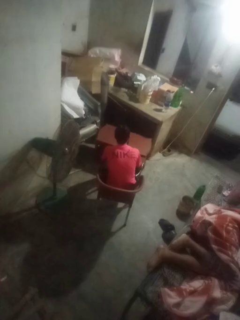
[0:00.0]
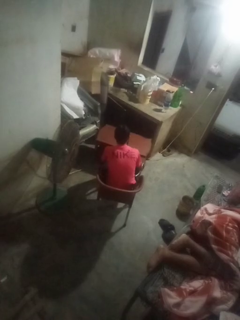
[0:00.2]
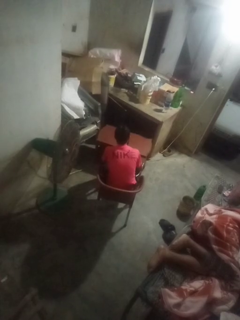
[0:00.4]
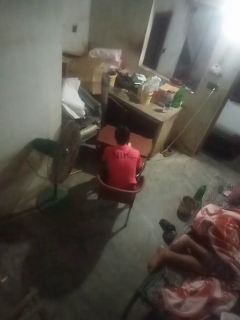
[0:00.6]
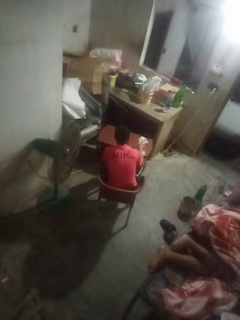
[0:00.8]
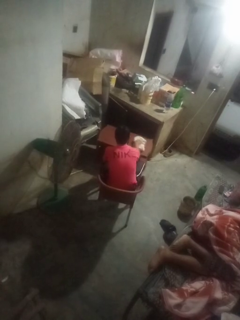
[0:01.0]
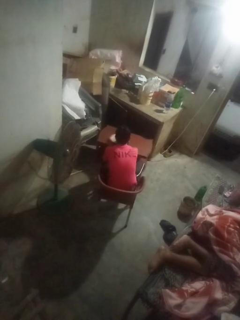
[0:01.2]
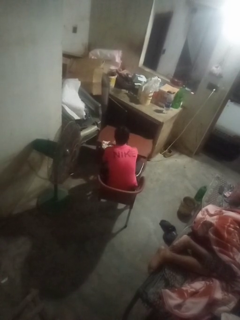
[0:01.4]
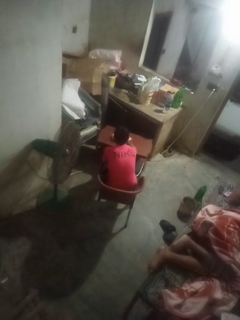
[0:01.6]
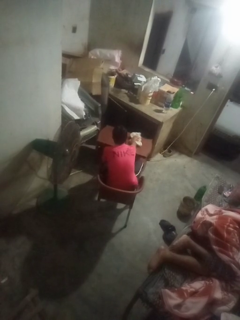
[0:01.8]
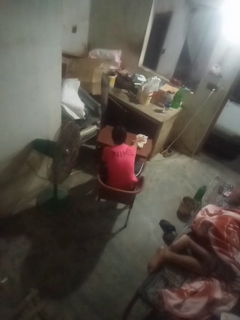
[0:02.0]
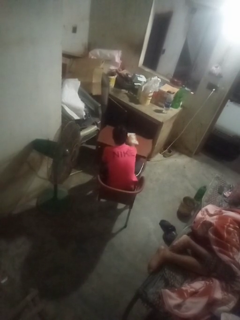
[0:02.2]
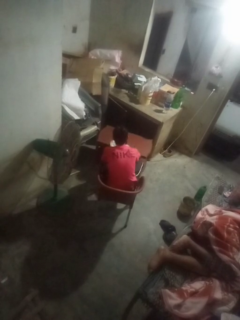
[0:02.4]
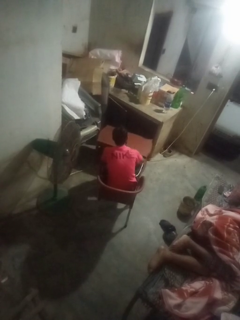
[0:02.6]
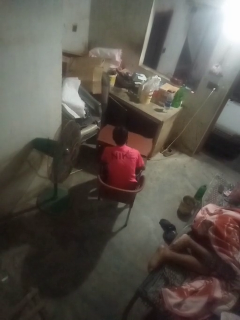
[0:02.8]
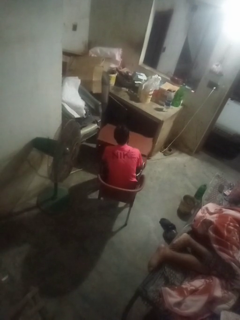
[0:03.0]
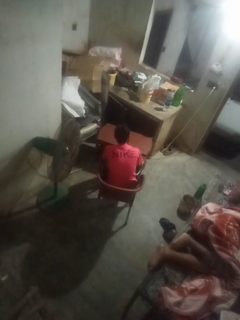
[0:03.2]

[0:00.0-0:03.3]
person cleans table with rag

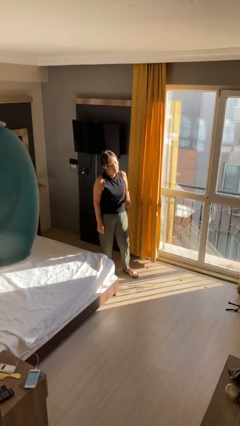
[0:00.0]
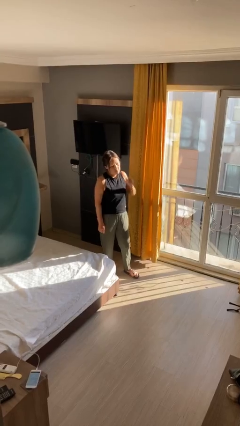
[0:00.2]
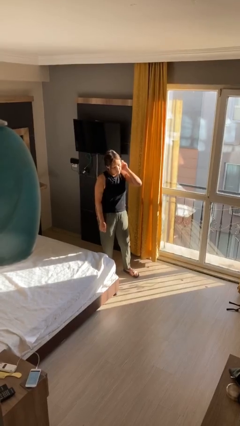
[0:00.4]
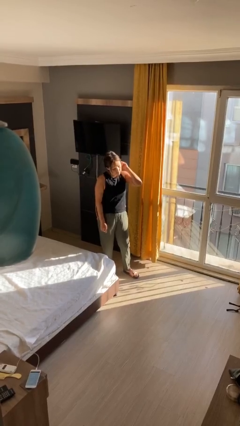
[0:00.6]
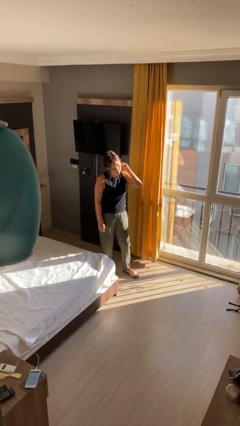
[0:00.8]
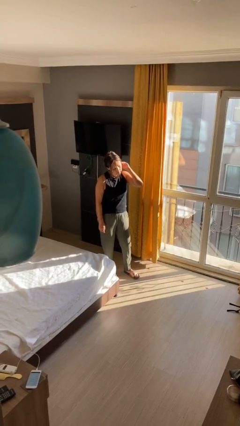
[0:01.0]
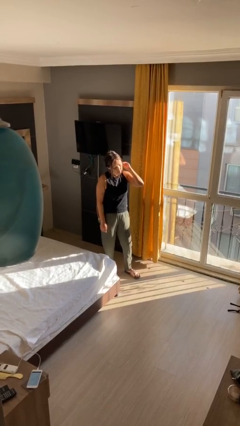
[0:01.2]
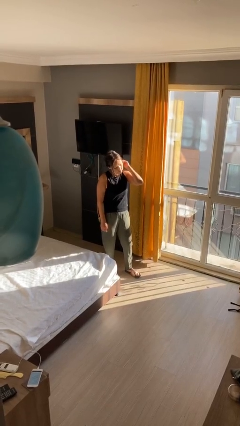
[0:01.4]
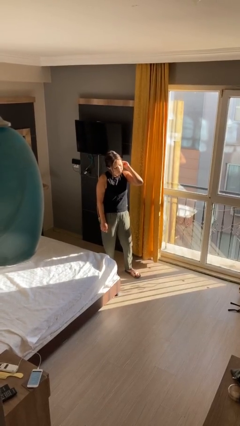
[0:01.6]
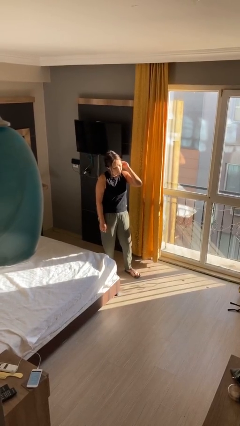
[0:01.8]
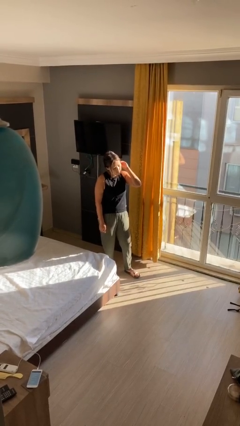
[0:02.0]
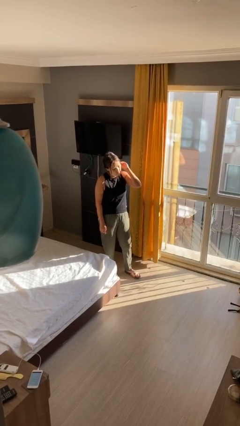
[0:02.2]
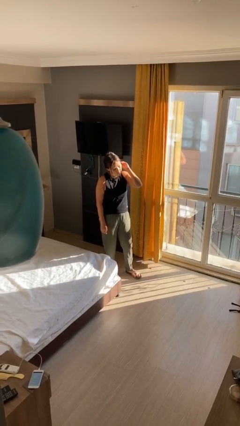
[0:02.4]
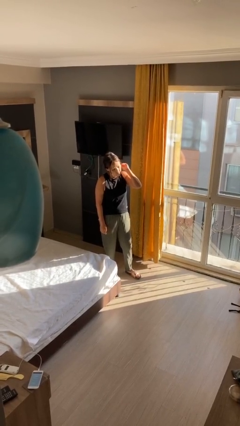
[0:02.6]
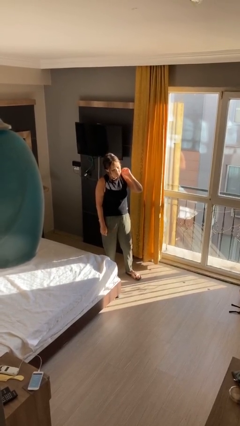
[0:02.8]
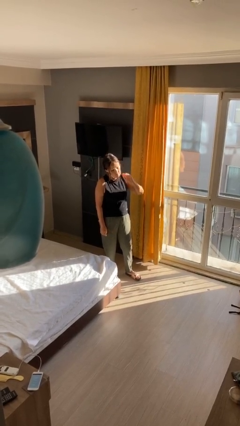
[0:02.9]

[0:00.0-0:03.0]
person touches earlobe

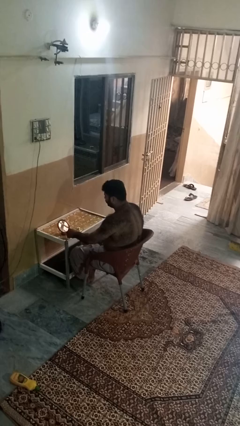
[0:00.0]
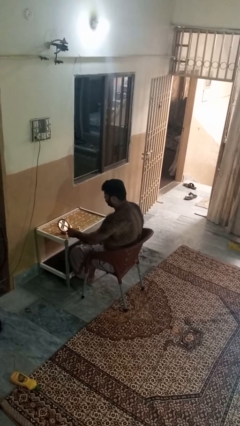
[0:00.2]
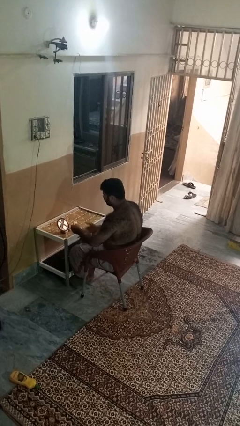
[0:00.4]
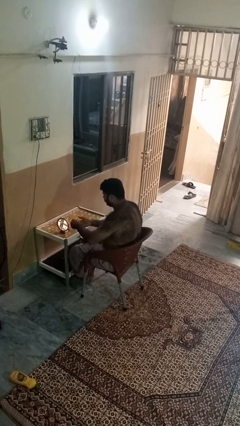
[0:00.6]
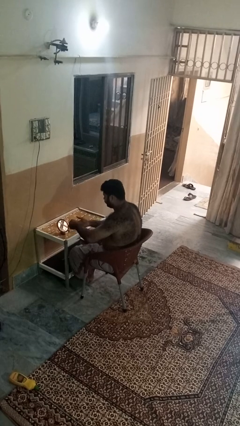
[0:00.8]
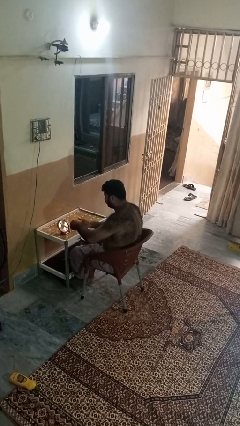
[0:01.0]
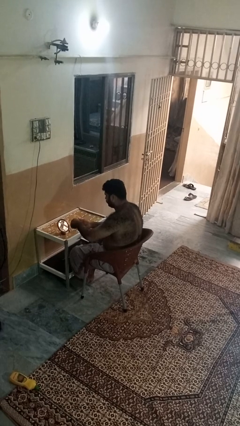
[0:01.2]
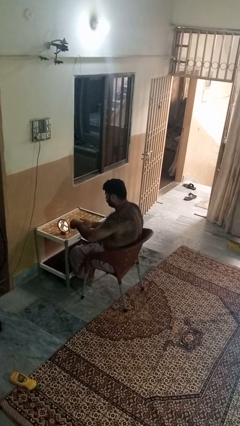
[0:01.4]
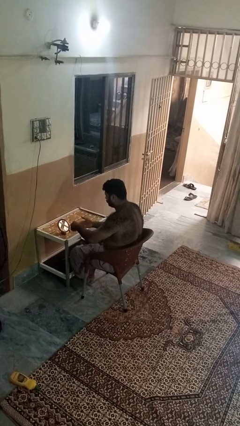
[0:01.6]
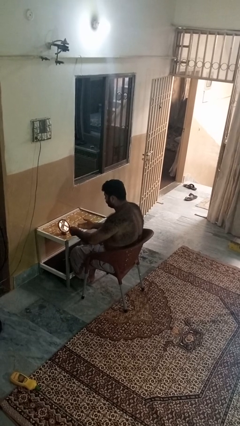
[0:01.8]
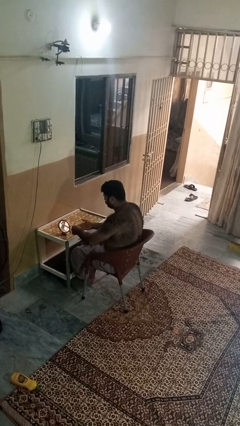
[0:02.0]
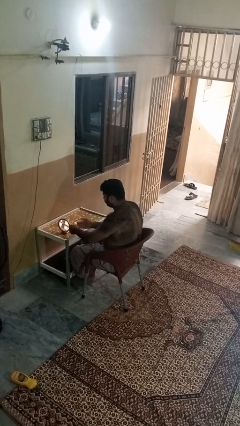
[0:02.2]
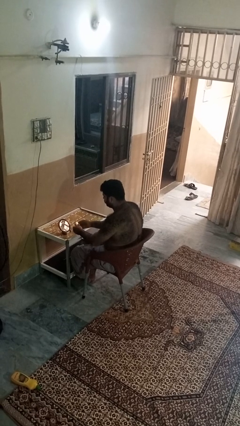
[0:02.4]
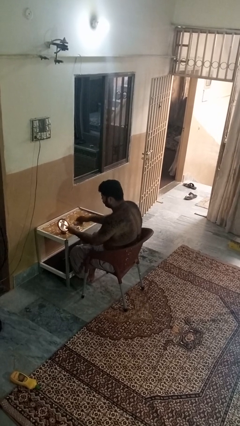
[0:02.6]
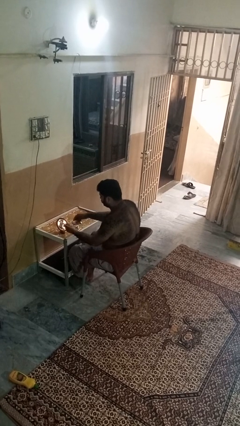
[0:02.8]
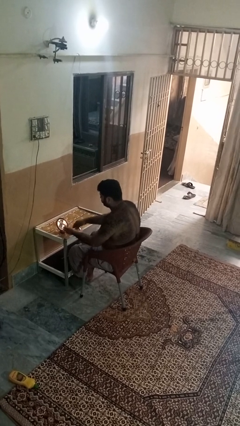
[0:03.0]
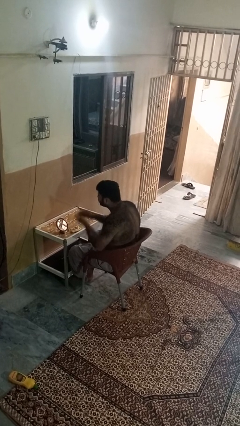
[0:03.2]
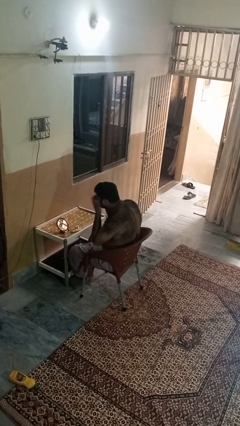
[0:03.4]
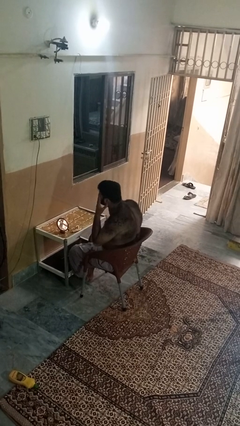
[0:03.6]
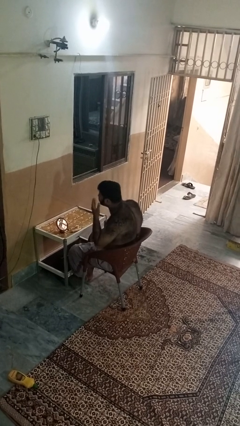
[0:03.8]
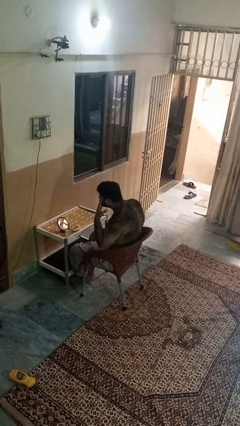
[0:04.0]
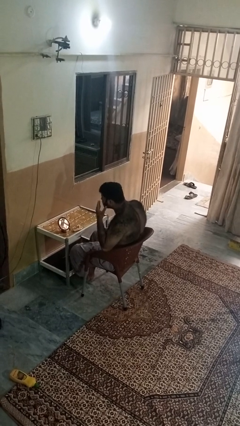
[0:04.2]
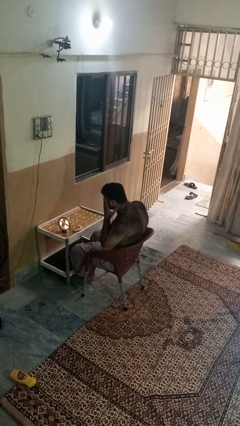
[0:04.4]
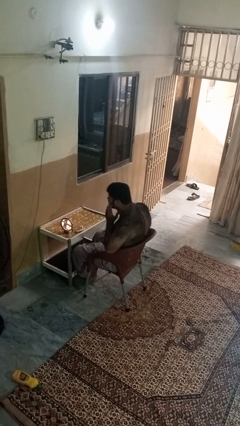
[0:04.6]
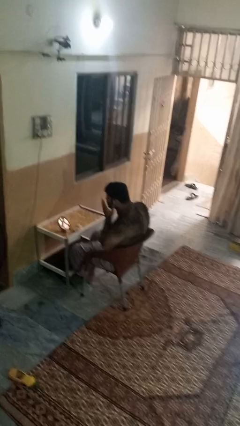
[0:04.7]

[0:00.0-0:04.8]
person applies foundation makeup

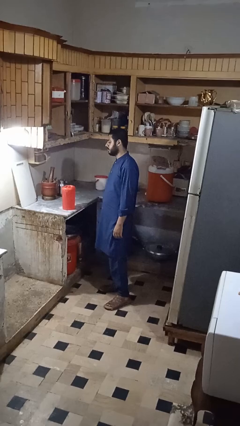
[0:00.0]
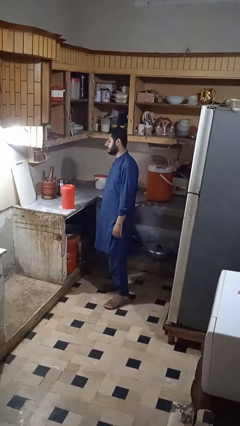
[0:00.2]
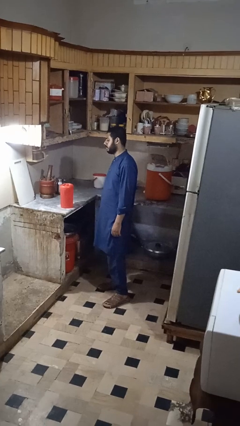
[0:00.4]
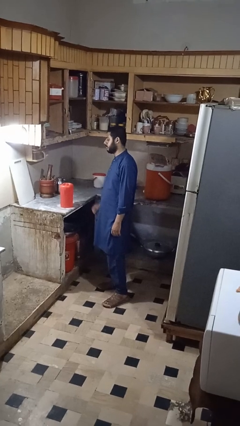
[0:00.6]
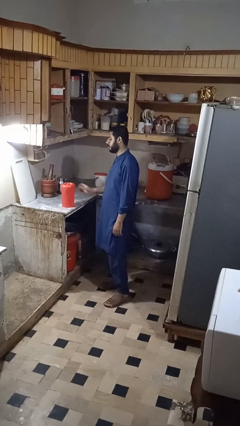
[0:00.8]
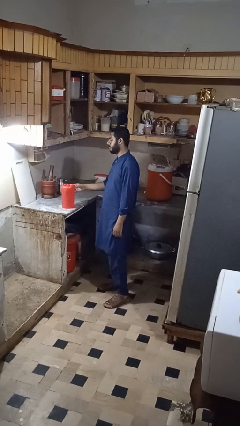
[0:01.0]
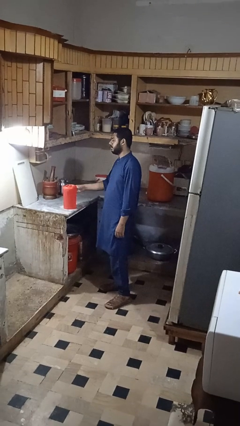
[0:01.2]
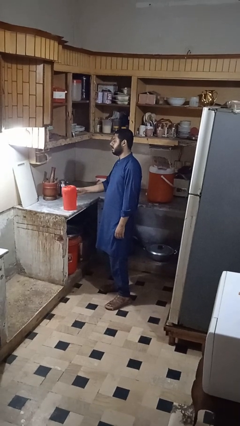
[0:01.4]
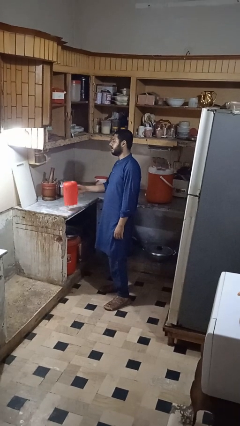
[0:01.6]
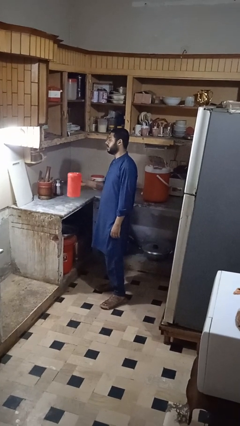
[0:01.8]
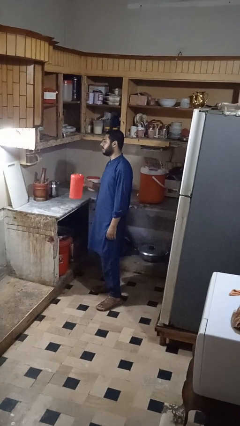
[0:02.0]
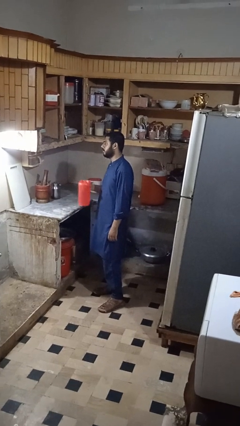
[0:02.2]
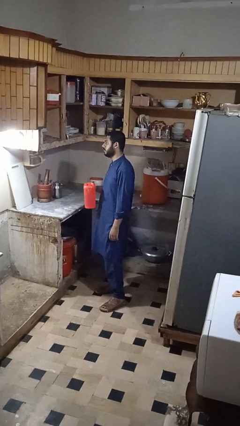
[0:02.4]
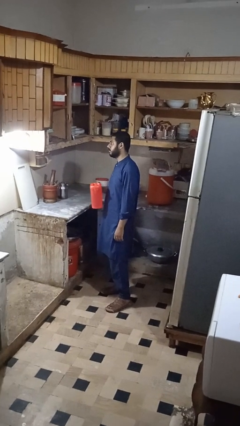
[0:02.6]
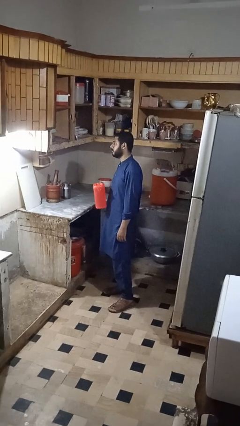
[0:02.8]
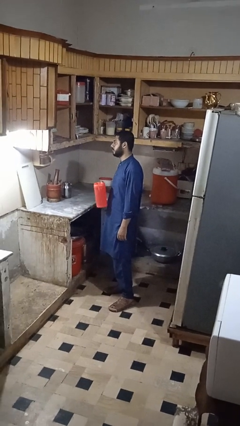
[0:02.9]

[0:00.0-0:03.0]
person picks up object from countertop

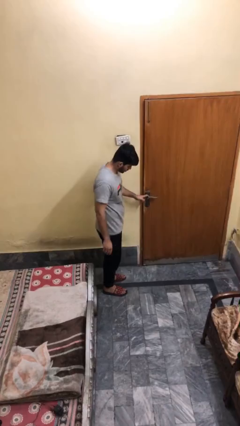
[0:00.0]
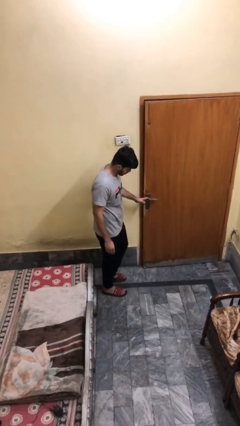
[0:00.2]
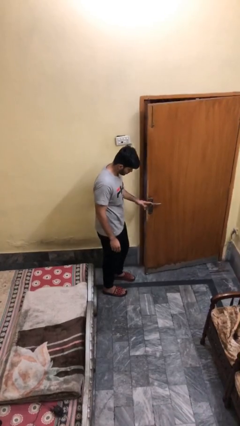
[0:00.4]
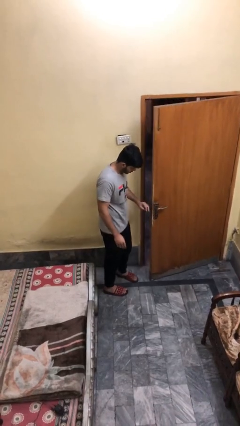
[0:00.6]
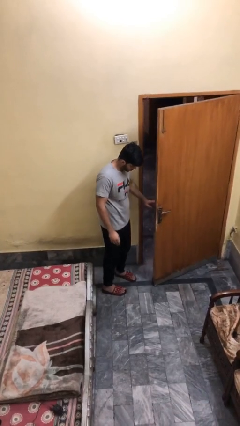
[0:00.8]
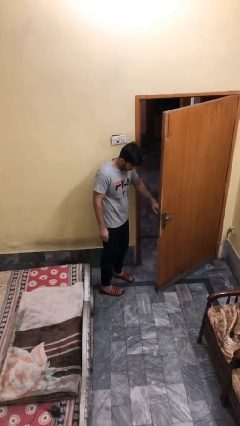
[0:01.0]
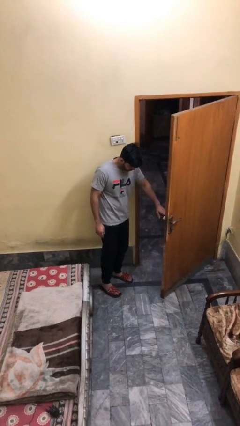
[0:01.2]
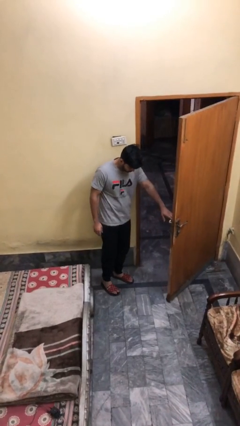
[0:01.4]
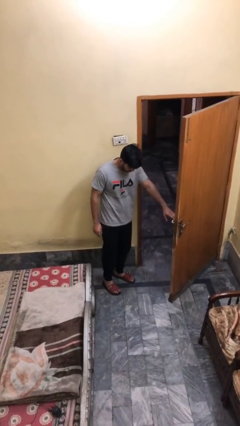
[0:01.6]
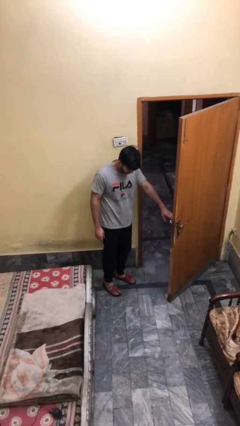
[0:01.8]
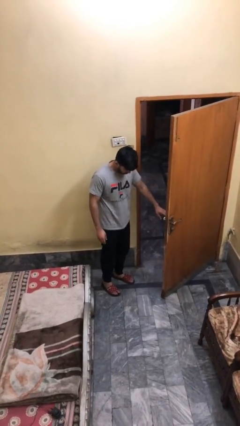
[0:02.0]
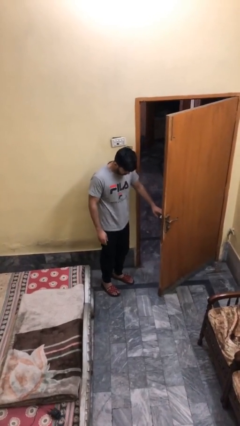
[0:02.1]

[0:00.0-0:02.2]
person opens facility door

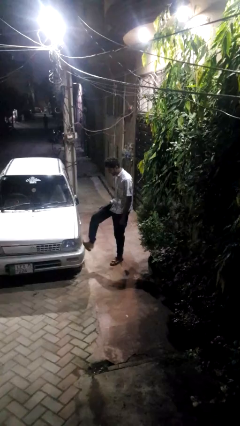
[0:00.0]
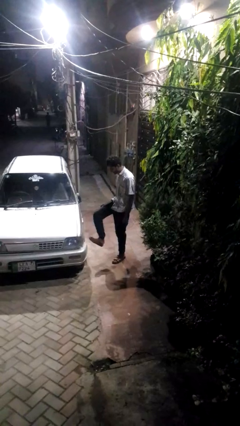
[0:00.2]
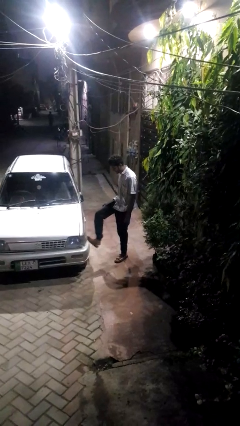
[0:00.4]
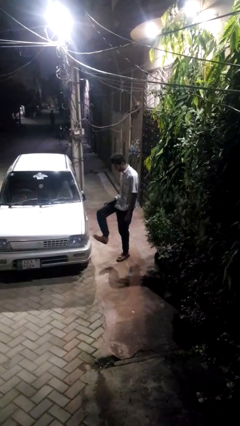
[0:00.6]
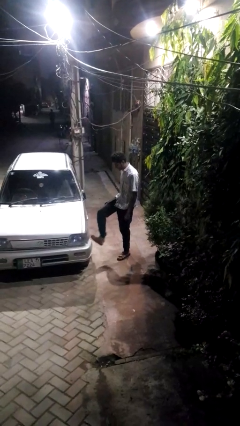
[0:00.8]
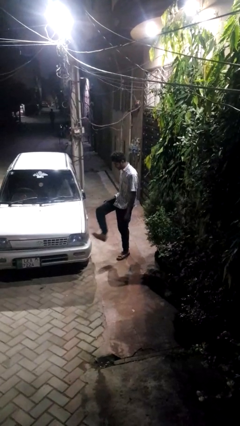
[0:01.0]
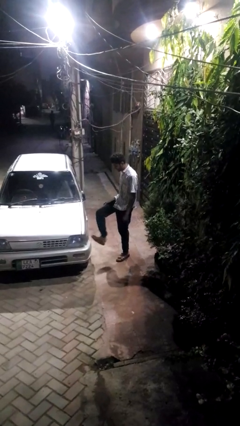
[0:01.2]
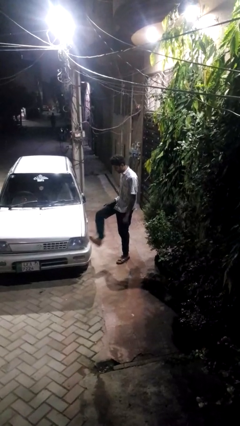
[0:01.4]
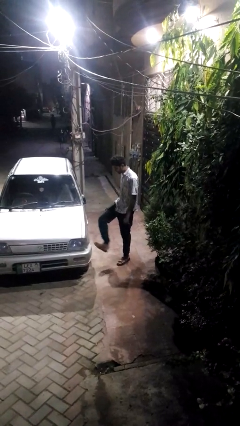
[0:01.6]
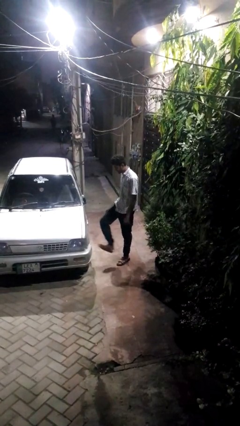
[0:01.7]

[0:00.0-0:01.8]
person kicks car tires
